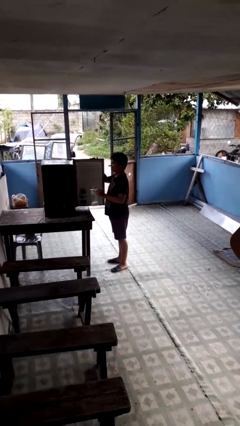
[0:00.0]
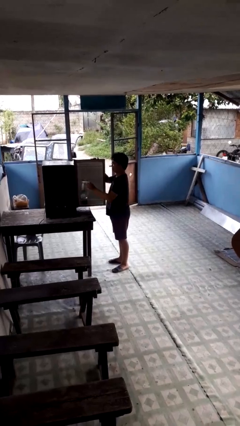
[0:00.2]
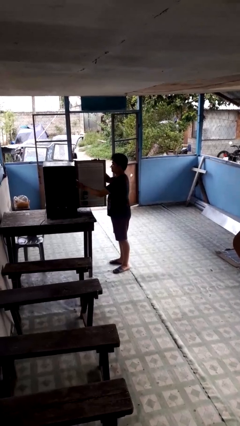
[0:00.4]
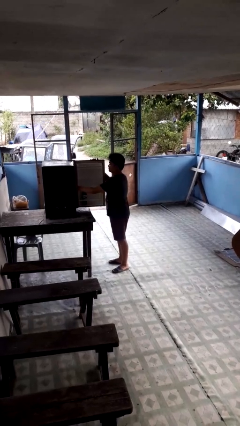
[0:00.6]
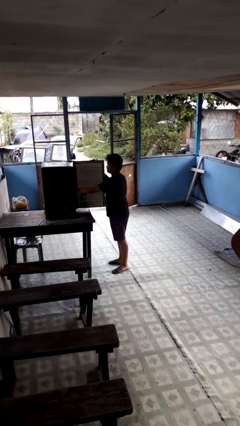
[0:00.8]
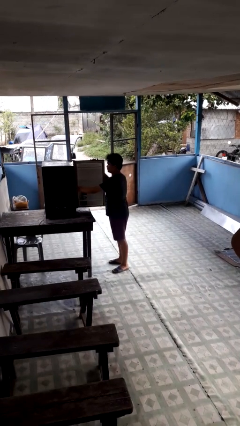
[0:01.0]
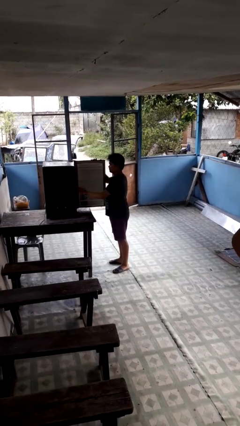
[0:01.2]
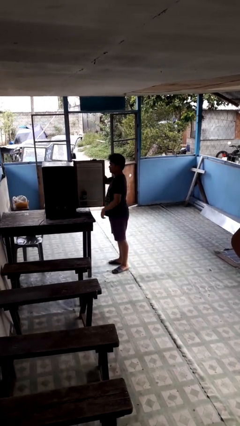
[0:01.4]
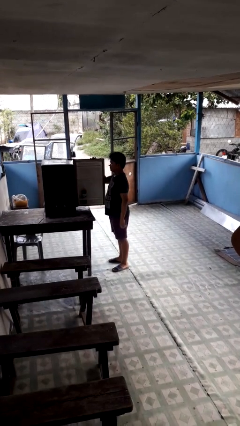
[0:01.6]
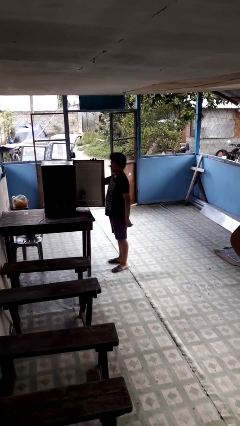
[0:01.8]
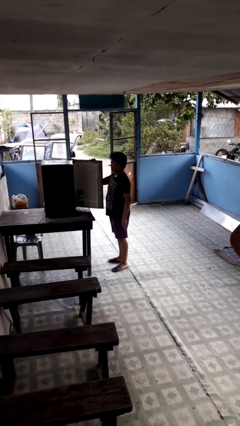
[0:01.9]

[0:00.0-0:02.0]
person puts object into refrigerator

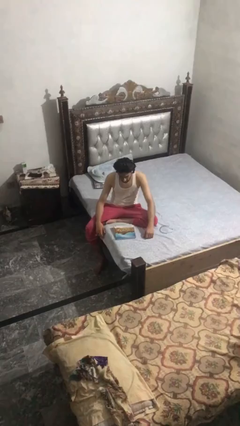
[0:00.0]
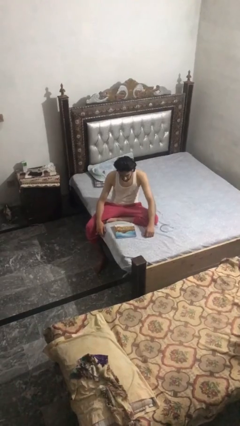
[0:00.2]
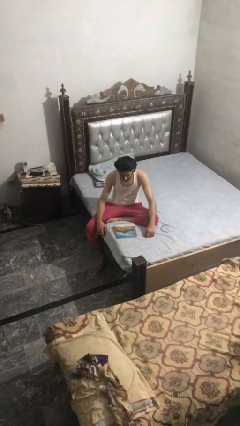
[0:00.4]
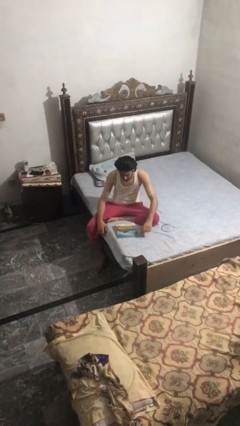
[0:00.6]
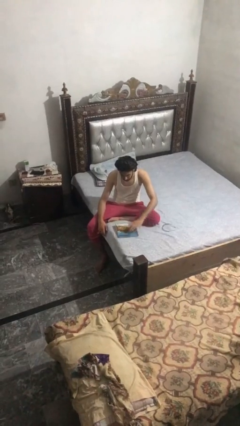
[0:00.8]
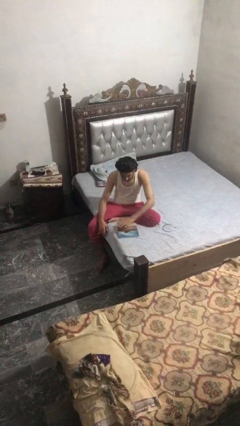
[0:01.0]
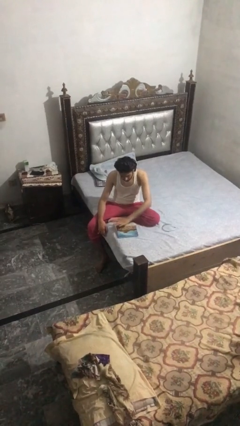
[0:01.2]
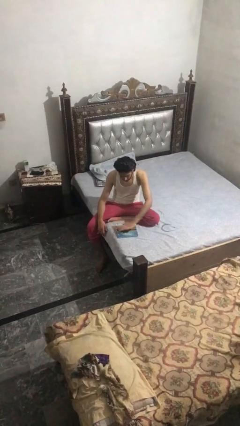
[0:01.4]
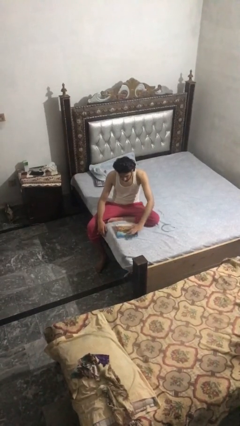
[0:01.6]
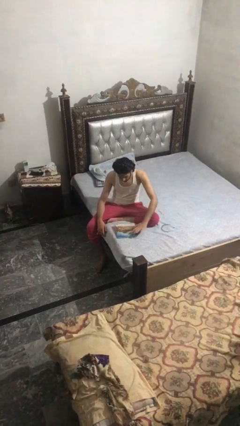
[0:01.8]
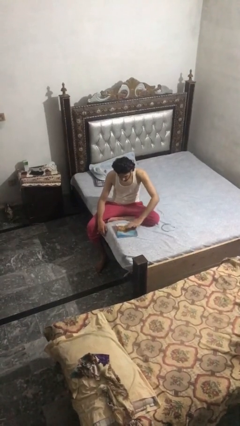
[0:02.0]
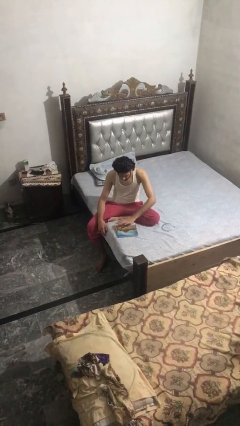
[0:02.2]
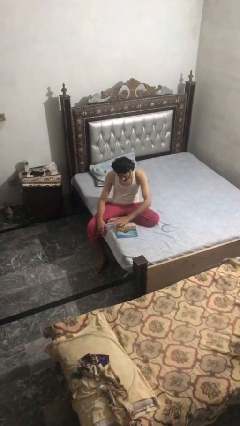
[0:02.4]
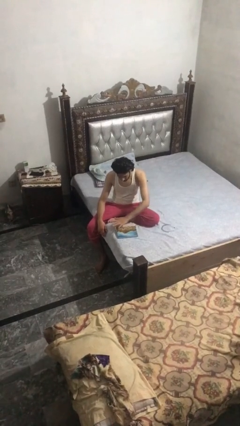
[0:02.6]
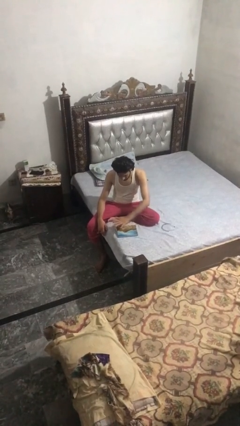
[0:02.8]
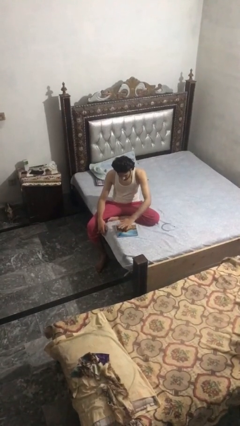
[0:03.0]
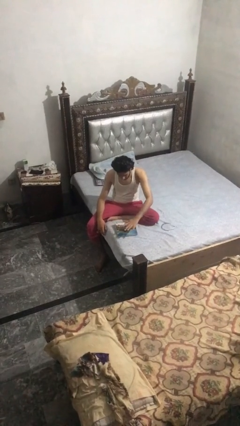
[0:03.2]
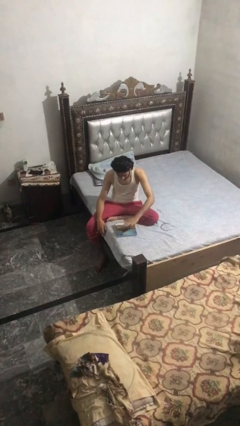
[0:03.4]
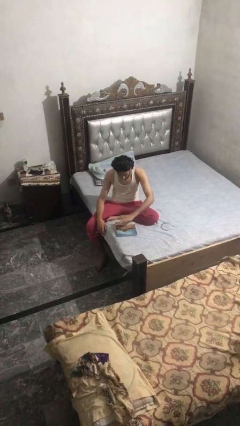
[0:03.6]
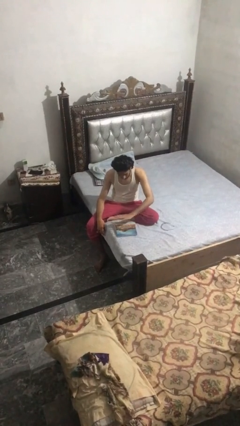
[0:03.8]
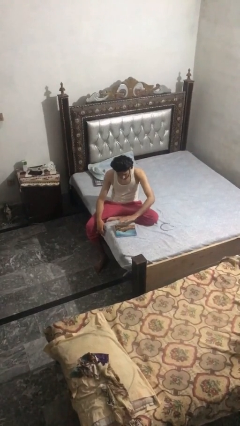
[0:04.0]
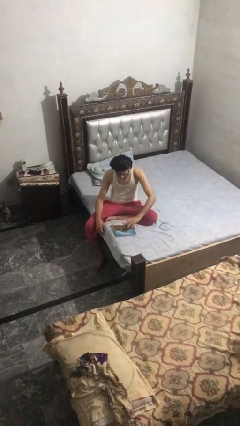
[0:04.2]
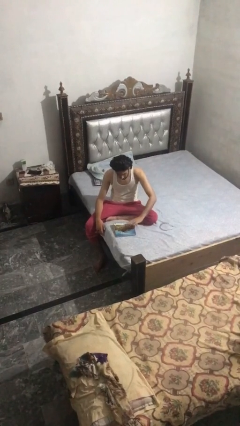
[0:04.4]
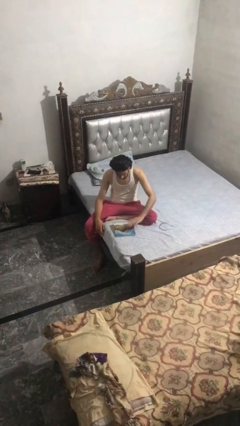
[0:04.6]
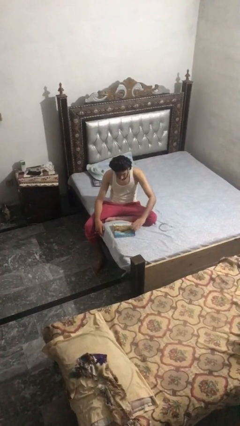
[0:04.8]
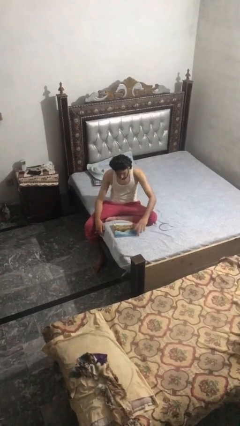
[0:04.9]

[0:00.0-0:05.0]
person waves hand over object

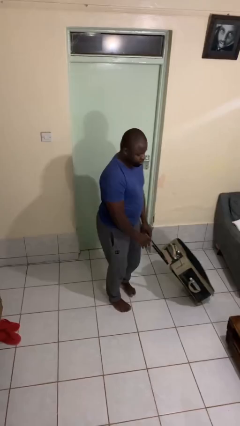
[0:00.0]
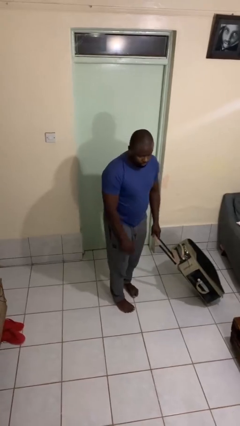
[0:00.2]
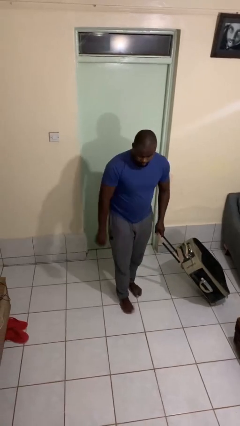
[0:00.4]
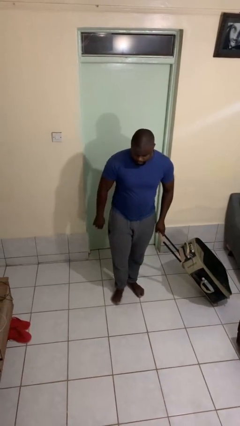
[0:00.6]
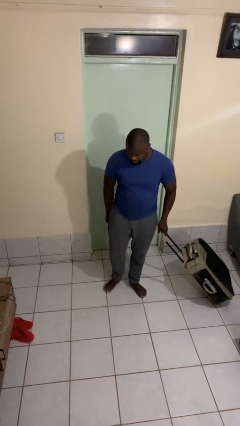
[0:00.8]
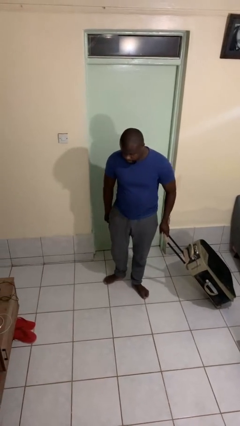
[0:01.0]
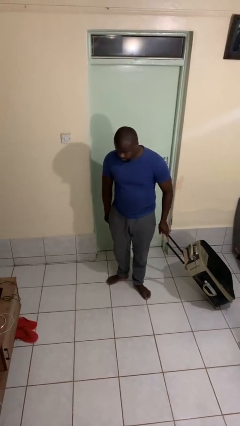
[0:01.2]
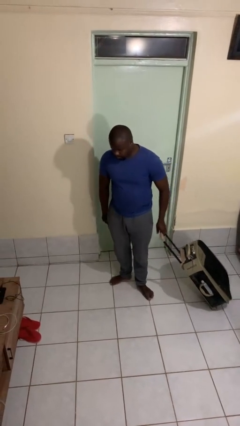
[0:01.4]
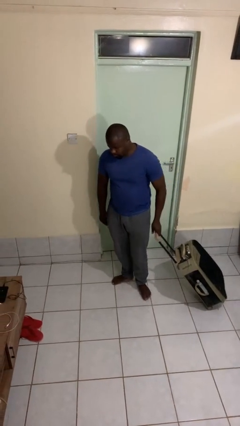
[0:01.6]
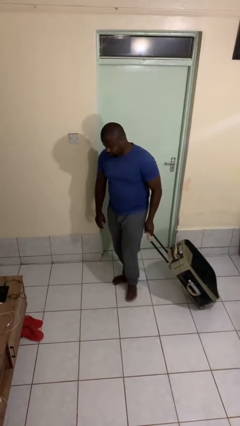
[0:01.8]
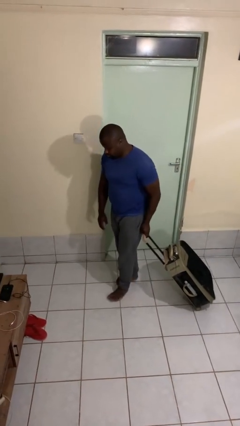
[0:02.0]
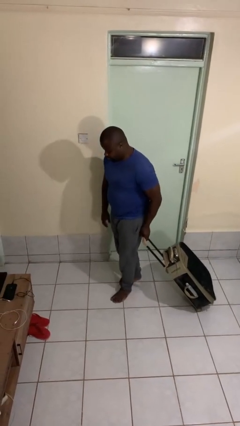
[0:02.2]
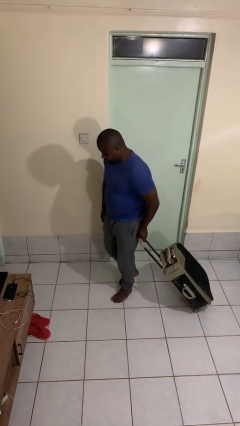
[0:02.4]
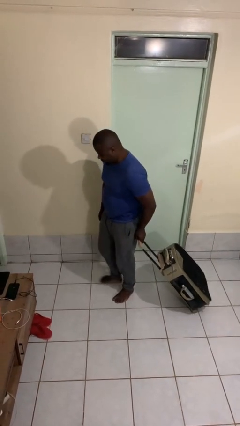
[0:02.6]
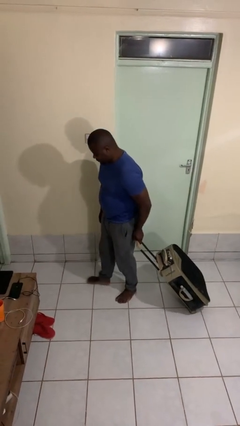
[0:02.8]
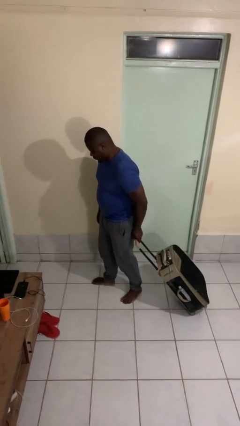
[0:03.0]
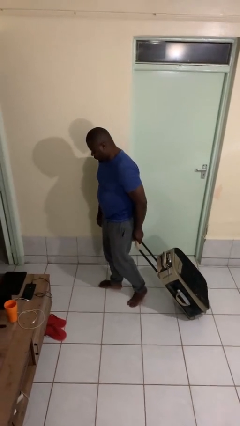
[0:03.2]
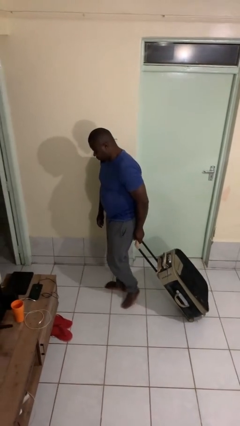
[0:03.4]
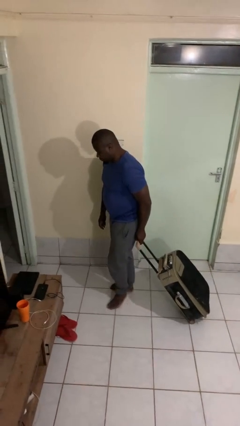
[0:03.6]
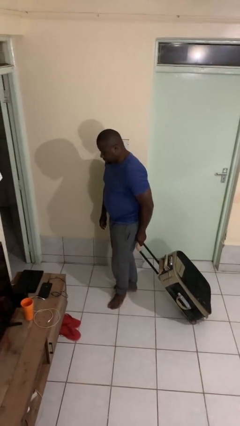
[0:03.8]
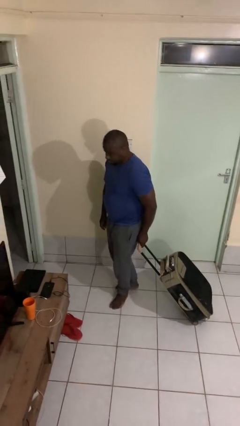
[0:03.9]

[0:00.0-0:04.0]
person pulls wheeled cart

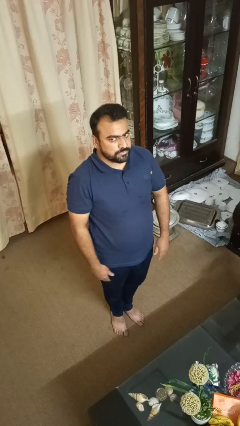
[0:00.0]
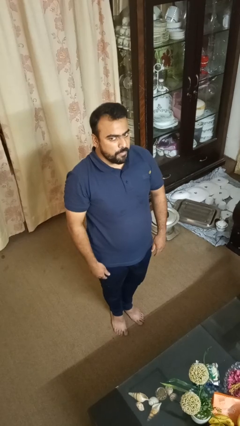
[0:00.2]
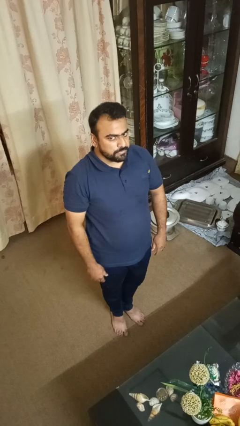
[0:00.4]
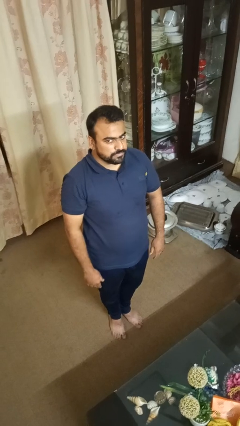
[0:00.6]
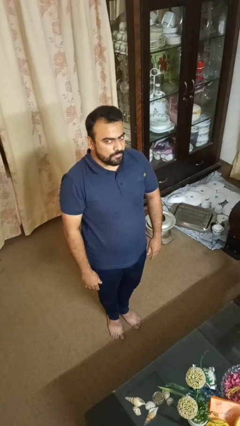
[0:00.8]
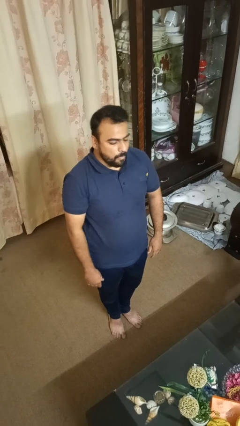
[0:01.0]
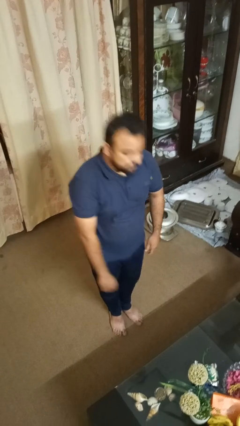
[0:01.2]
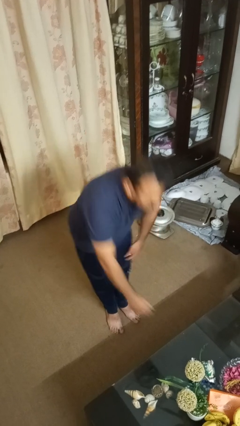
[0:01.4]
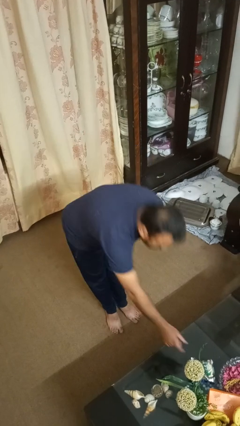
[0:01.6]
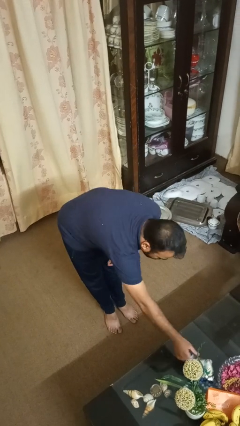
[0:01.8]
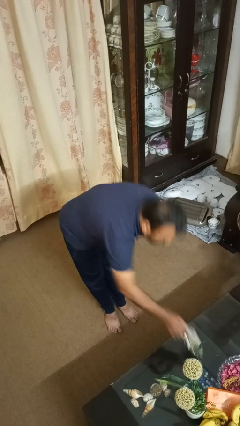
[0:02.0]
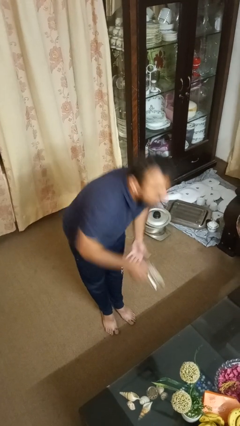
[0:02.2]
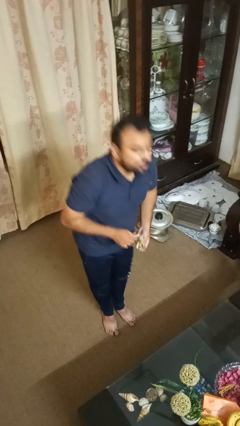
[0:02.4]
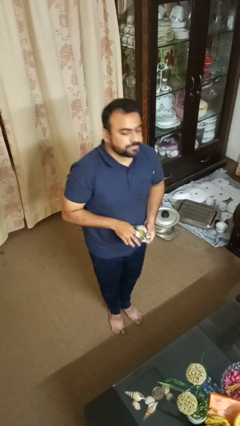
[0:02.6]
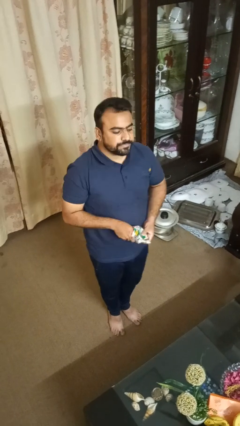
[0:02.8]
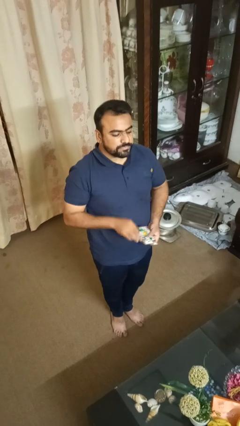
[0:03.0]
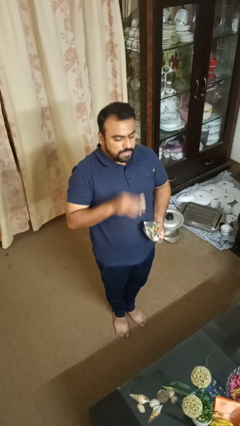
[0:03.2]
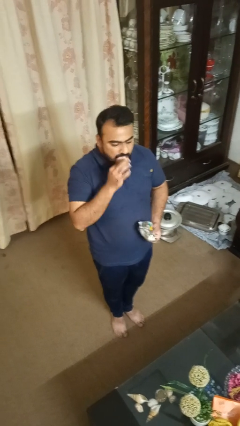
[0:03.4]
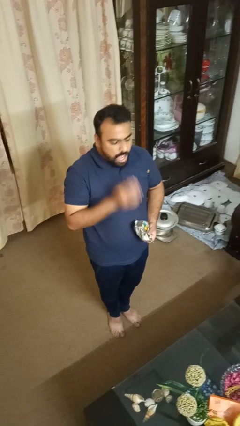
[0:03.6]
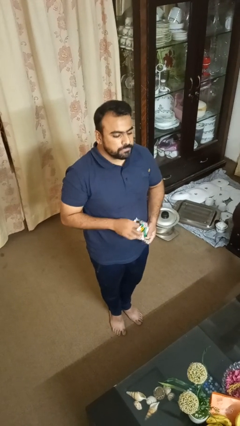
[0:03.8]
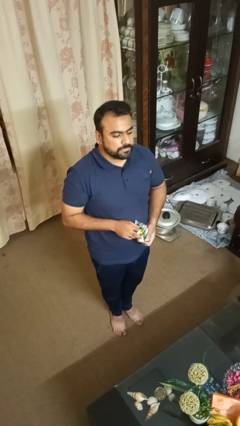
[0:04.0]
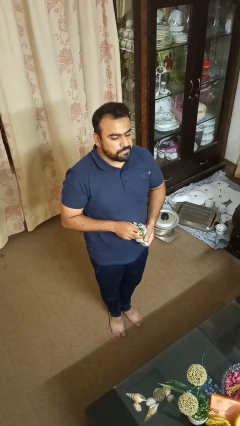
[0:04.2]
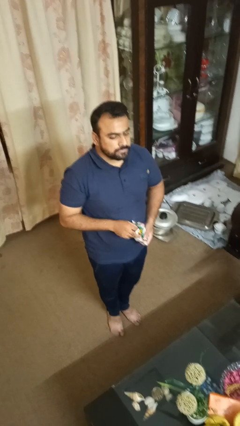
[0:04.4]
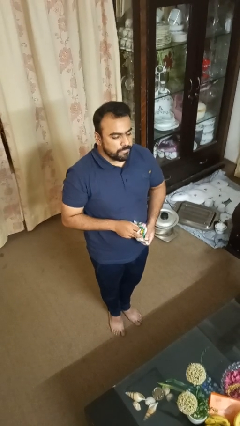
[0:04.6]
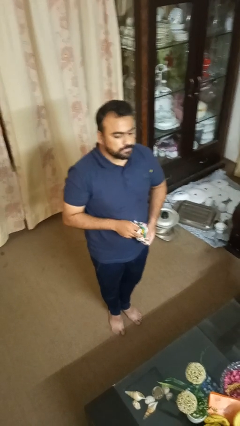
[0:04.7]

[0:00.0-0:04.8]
person eats snack from bag

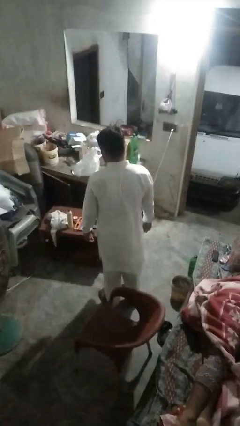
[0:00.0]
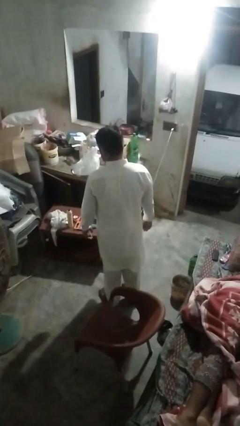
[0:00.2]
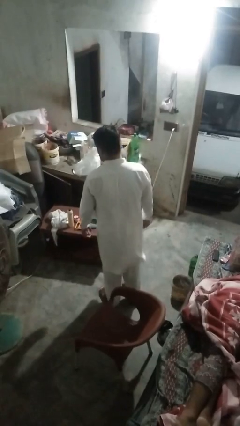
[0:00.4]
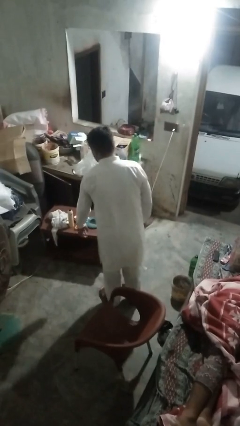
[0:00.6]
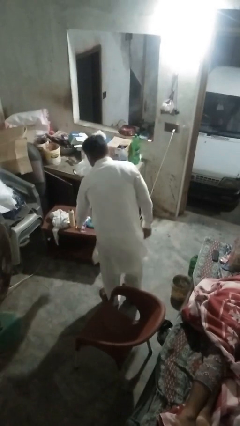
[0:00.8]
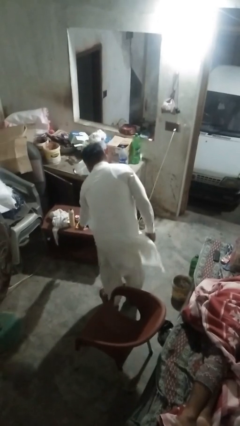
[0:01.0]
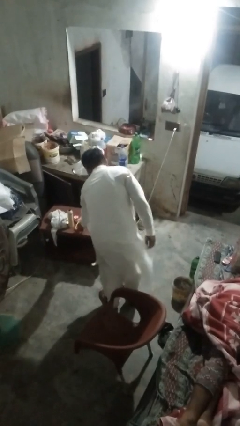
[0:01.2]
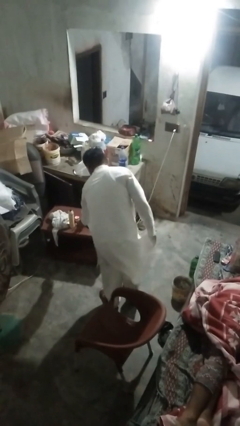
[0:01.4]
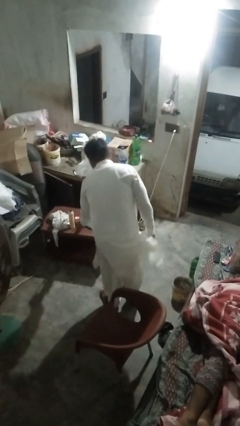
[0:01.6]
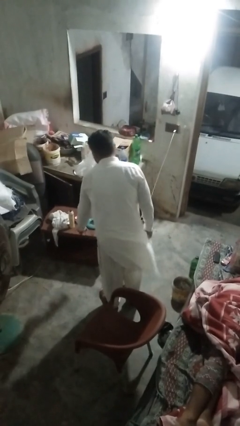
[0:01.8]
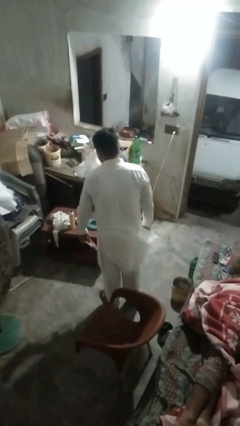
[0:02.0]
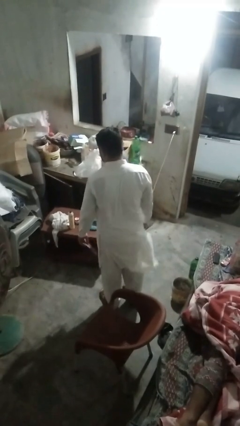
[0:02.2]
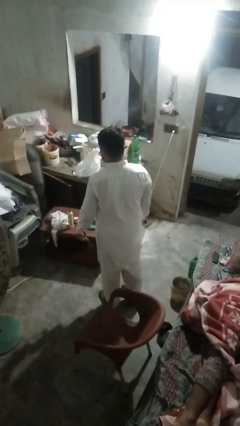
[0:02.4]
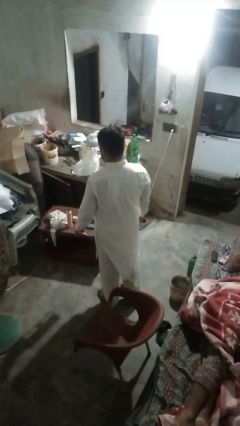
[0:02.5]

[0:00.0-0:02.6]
person picks up object from table
